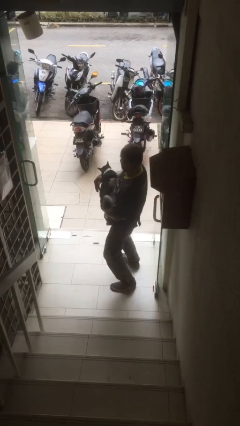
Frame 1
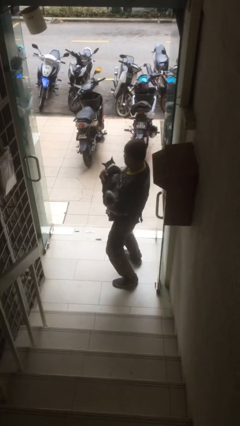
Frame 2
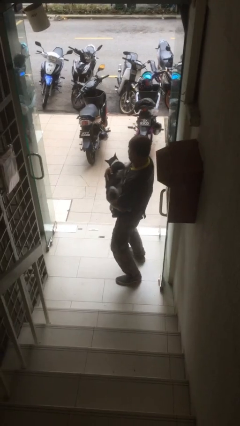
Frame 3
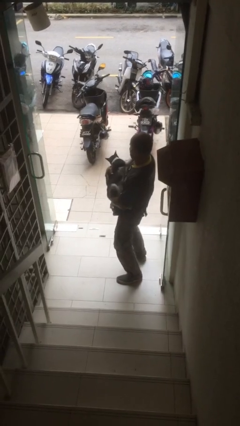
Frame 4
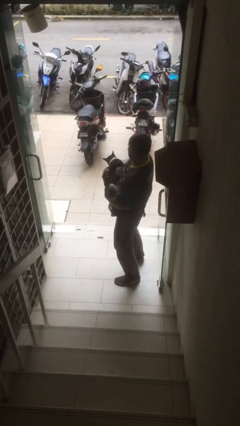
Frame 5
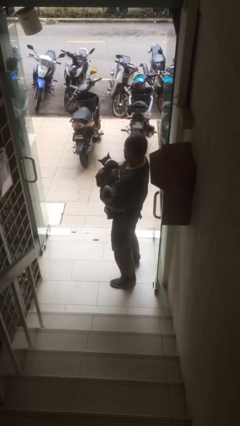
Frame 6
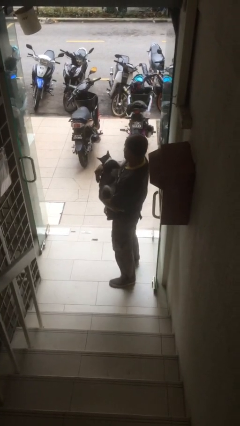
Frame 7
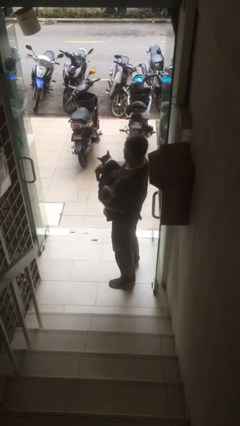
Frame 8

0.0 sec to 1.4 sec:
person hugs cat

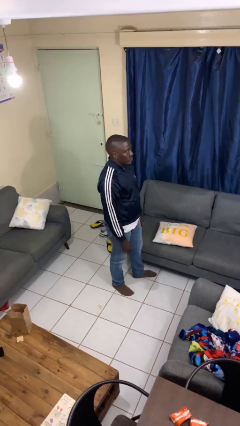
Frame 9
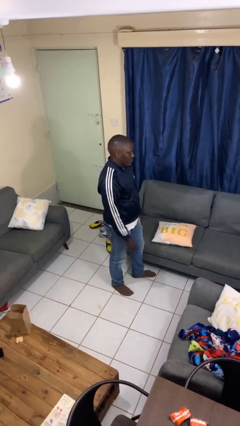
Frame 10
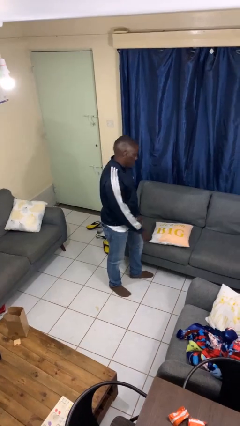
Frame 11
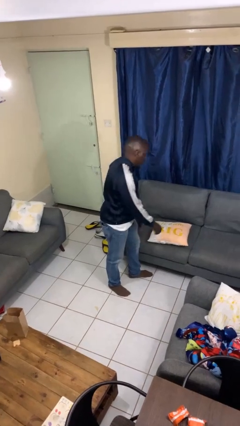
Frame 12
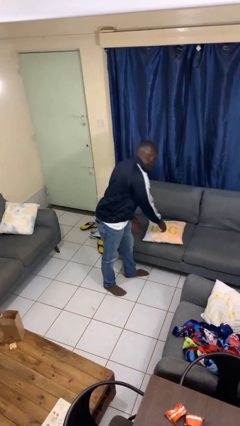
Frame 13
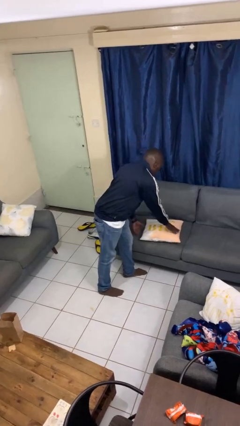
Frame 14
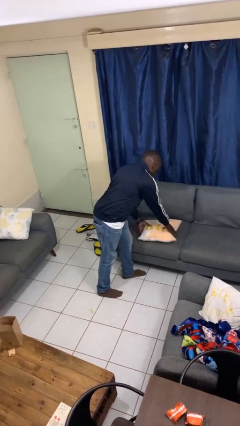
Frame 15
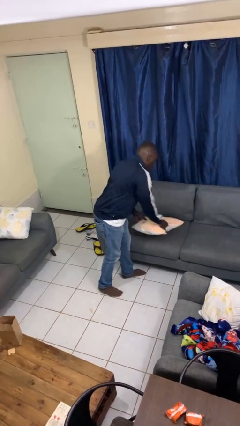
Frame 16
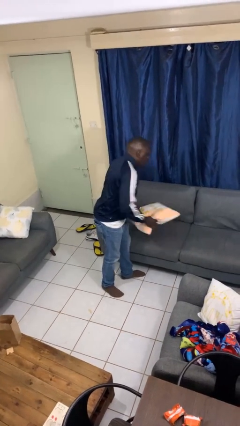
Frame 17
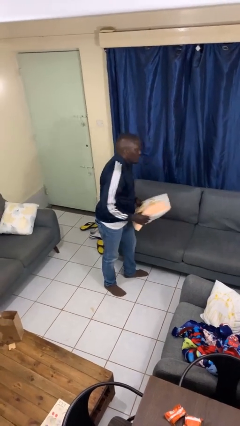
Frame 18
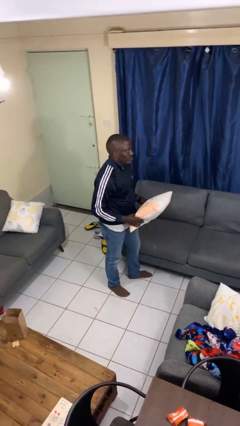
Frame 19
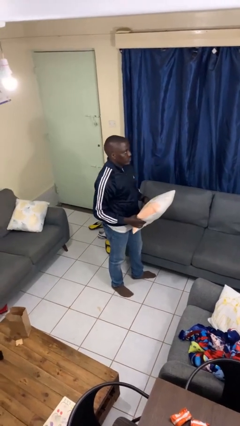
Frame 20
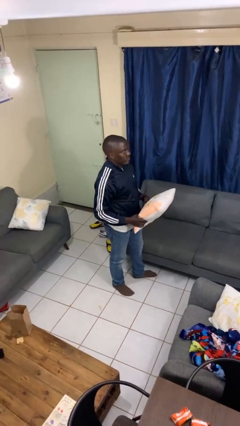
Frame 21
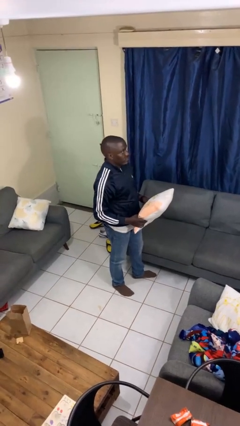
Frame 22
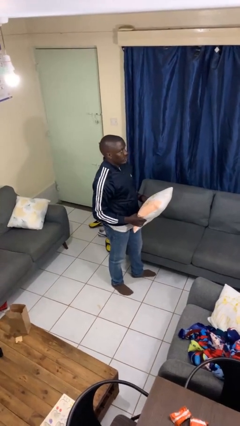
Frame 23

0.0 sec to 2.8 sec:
person picks up object from couch

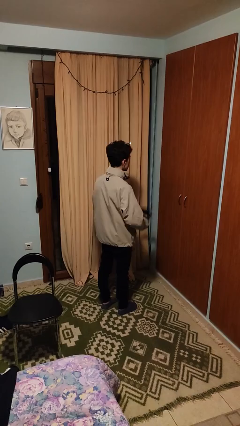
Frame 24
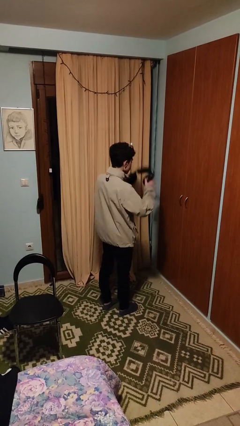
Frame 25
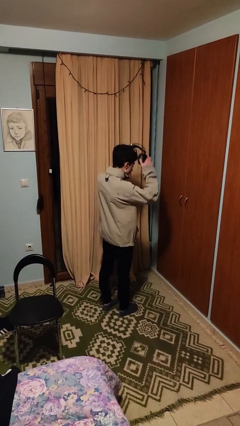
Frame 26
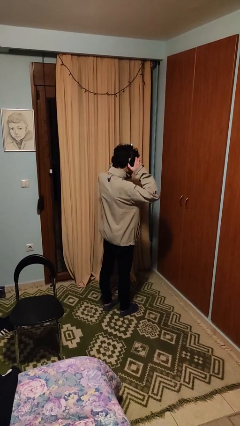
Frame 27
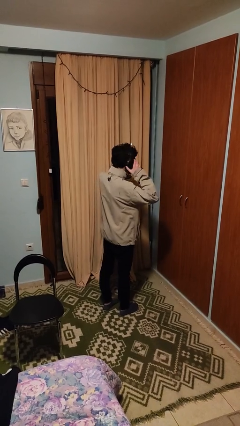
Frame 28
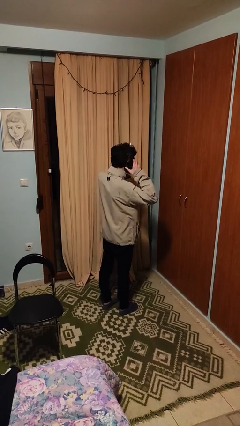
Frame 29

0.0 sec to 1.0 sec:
person puts on headphones

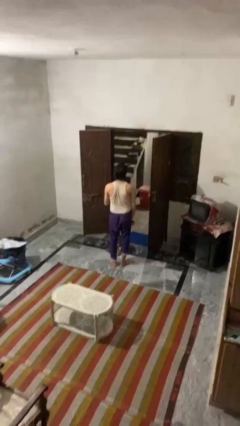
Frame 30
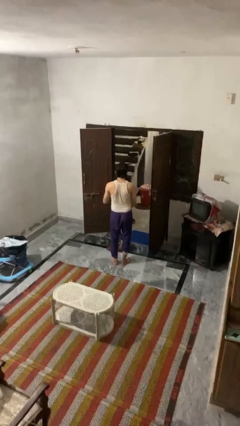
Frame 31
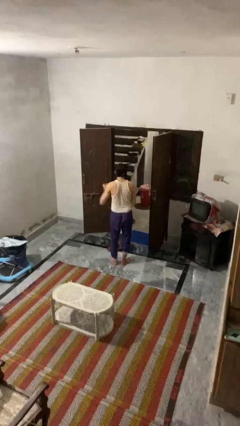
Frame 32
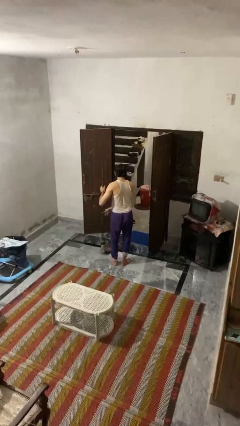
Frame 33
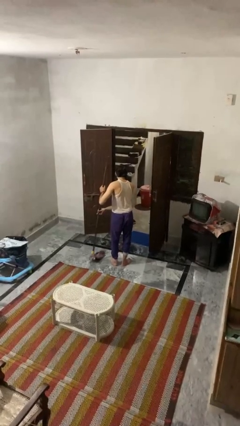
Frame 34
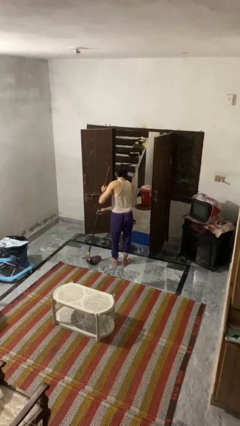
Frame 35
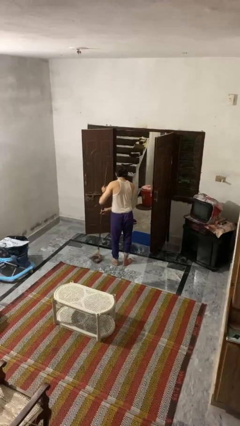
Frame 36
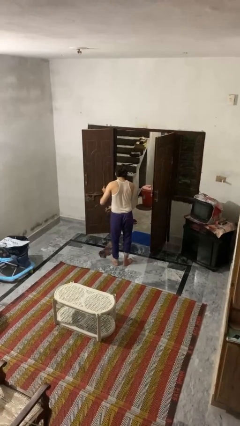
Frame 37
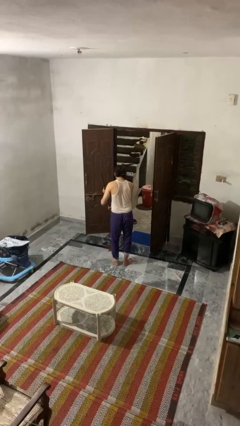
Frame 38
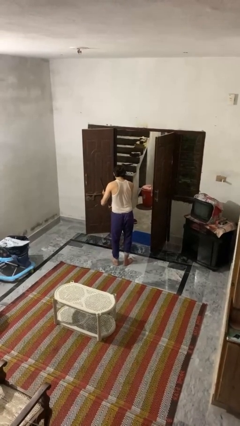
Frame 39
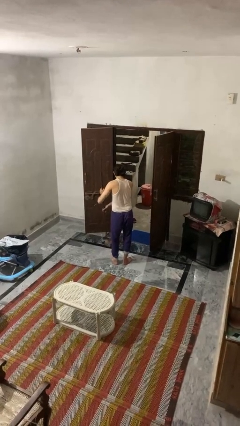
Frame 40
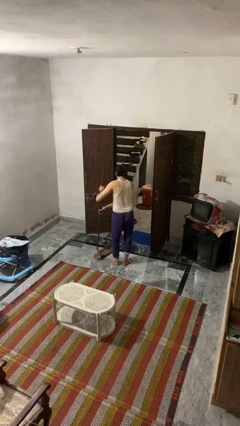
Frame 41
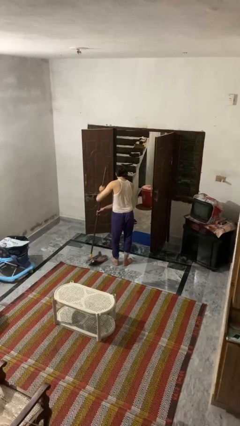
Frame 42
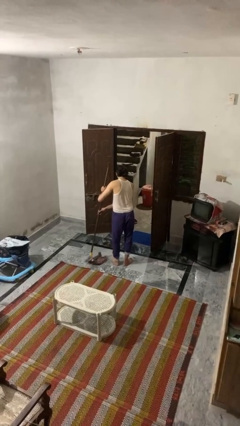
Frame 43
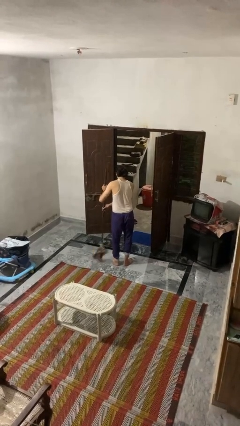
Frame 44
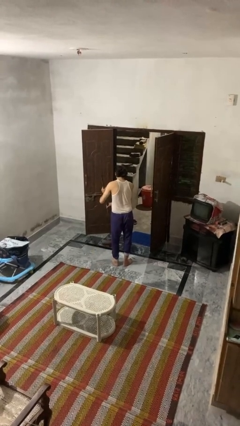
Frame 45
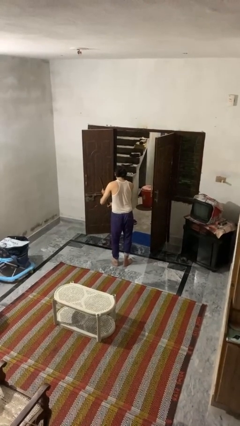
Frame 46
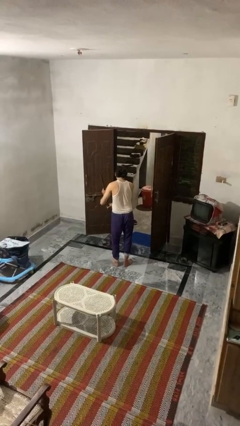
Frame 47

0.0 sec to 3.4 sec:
person mops

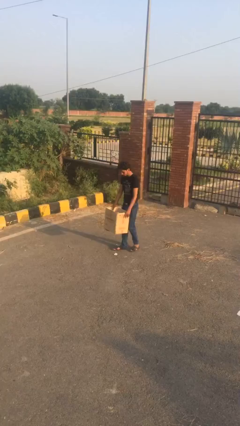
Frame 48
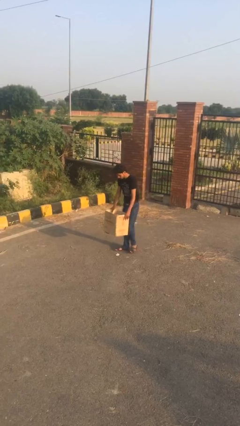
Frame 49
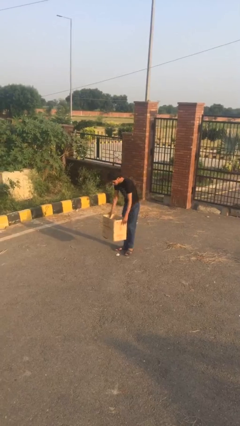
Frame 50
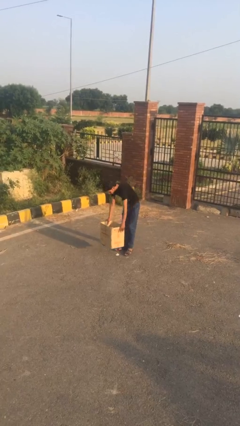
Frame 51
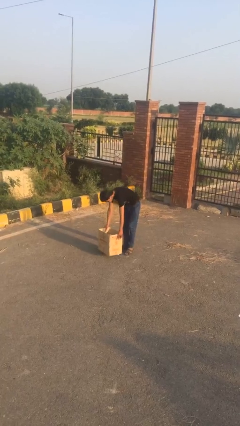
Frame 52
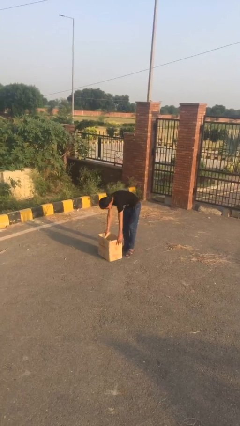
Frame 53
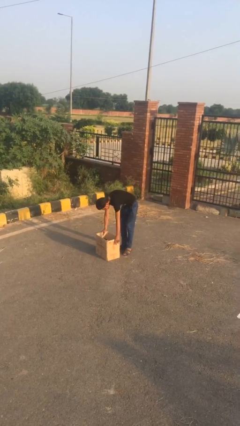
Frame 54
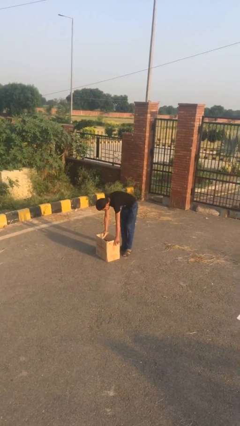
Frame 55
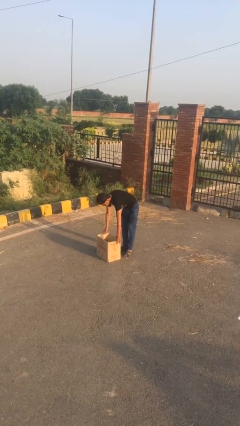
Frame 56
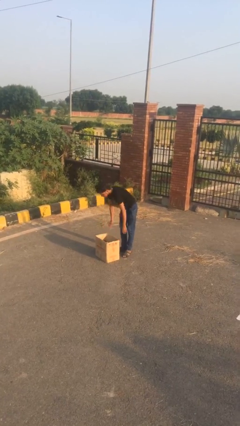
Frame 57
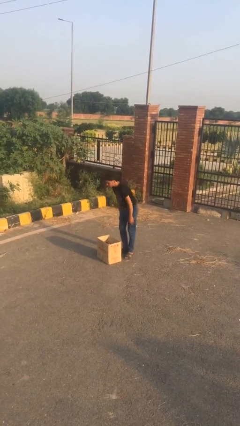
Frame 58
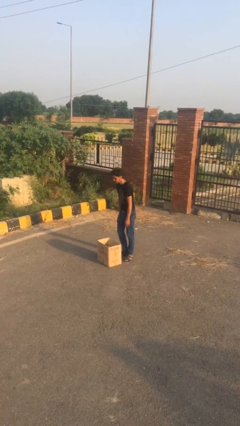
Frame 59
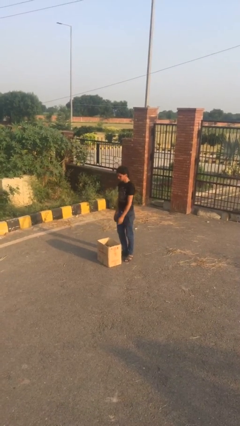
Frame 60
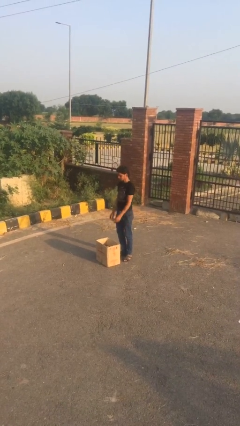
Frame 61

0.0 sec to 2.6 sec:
person puts down object on floor

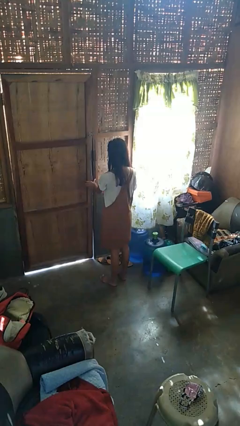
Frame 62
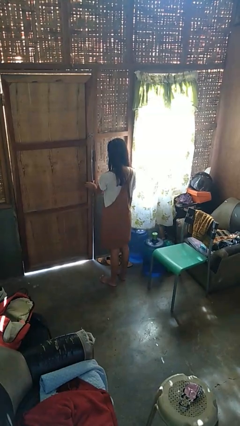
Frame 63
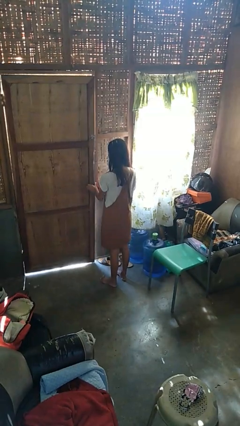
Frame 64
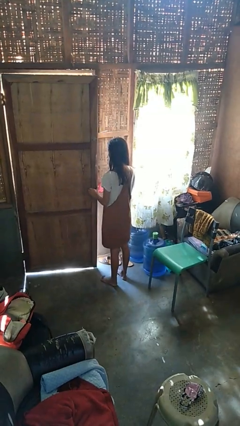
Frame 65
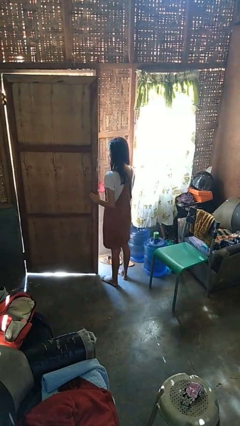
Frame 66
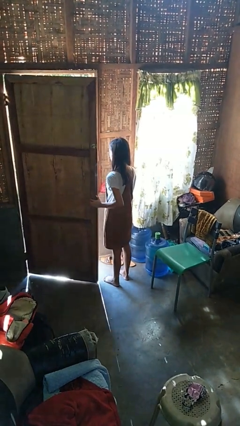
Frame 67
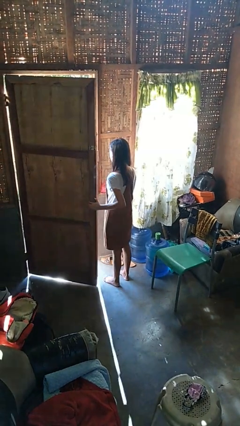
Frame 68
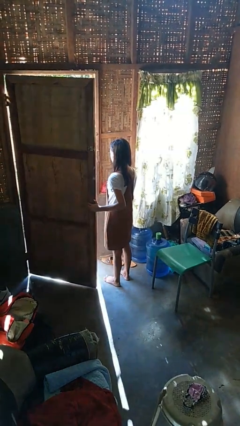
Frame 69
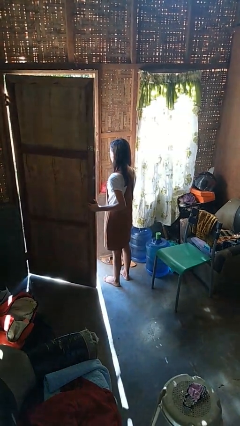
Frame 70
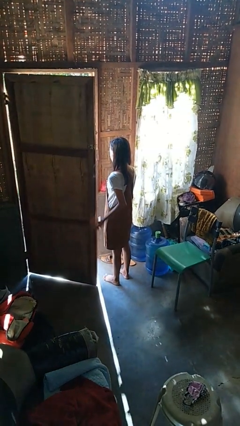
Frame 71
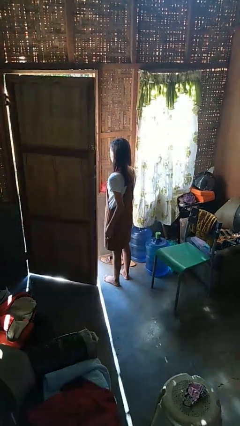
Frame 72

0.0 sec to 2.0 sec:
person opens facility door

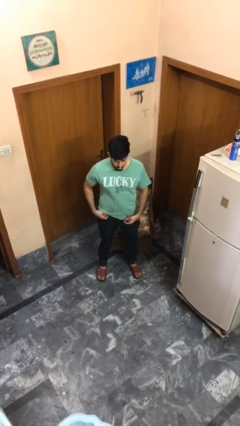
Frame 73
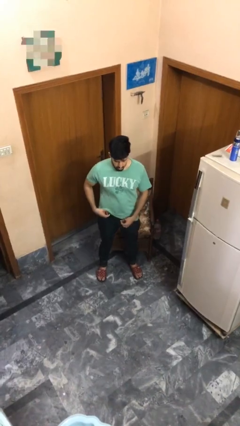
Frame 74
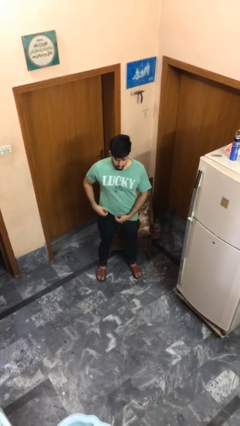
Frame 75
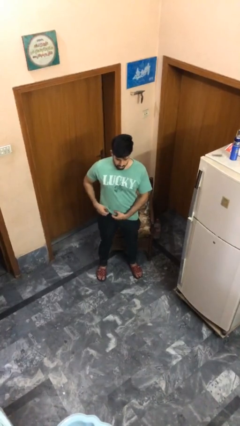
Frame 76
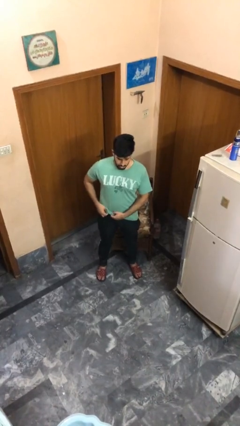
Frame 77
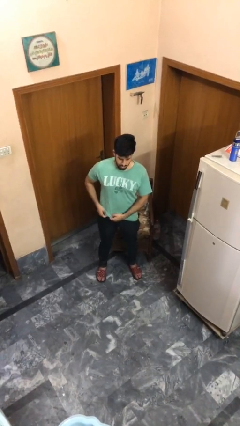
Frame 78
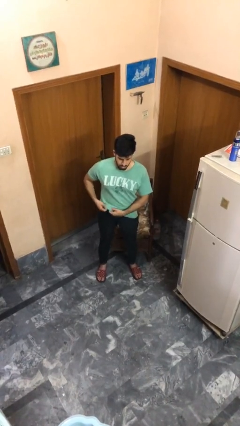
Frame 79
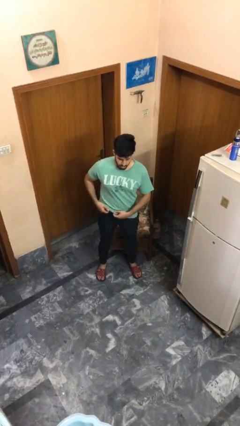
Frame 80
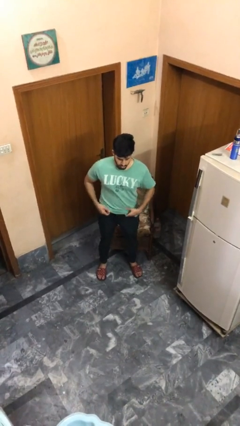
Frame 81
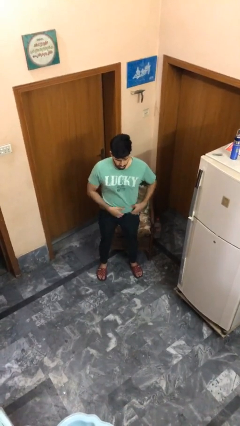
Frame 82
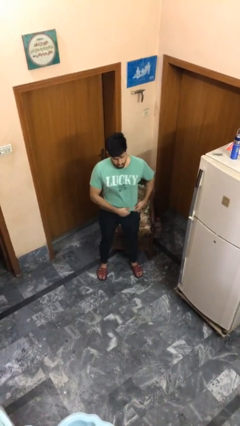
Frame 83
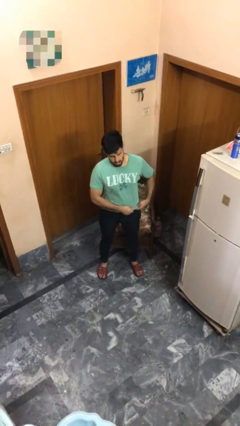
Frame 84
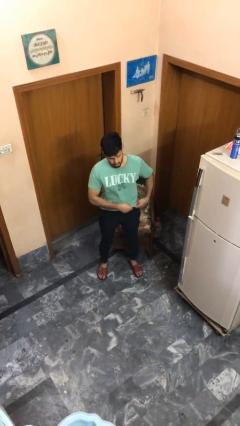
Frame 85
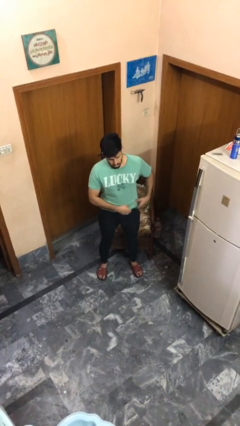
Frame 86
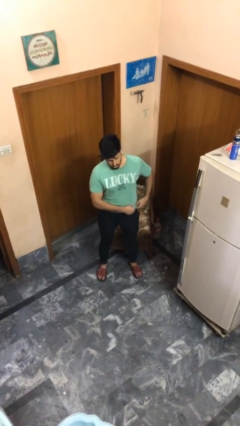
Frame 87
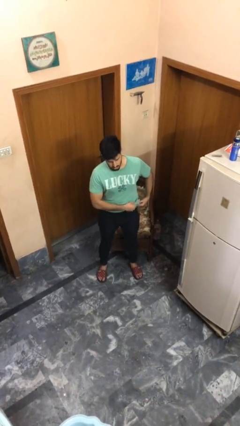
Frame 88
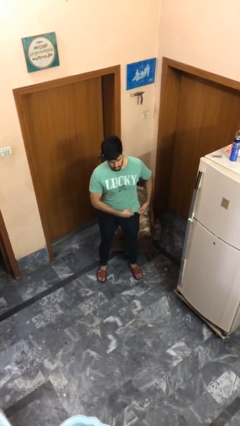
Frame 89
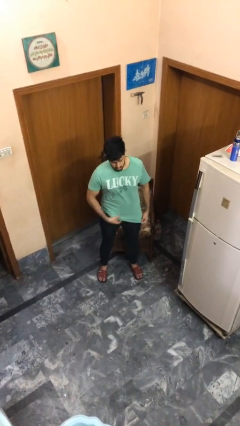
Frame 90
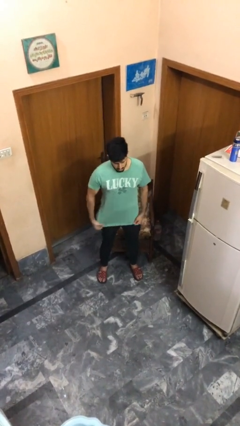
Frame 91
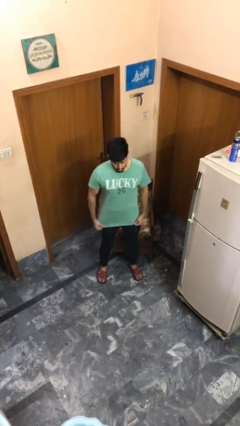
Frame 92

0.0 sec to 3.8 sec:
person hikes up pants

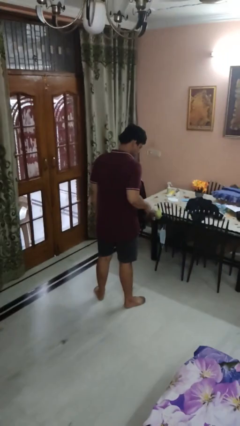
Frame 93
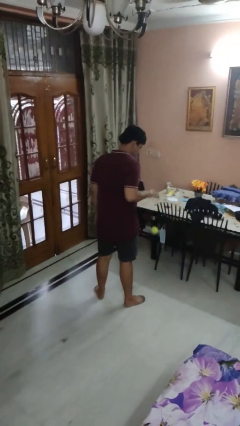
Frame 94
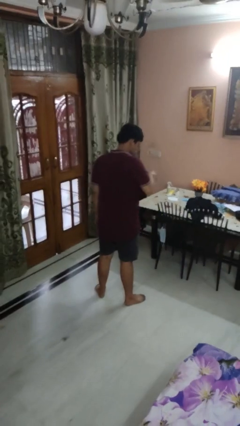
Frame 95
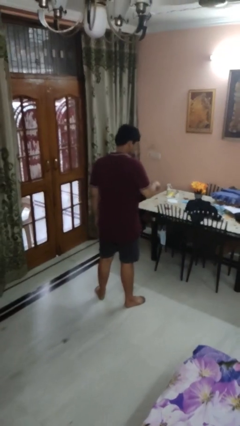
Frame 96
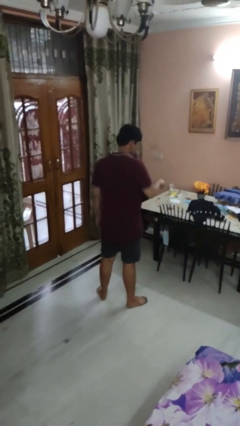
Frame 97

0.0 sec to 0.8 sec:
person bounces ball on floor
